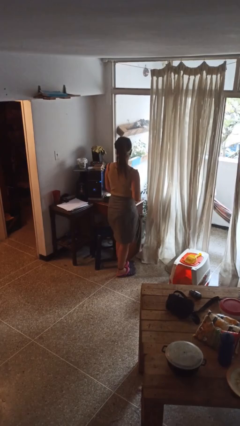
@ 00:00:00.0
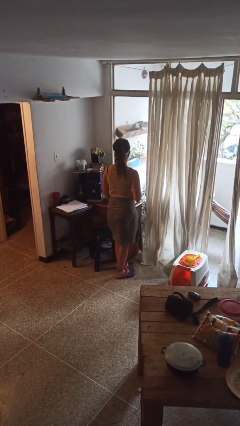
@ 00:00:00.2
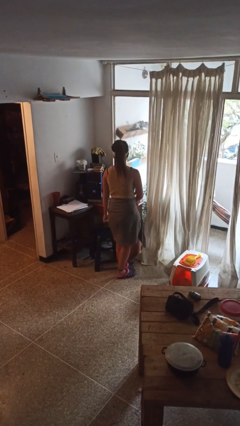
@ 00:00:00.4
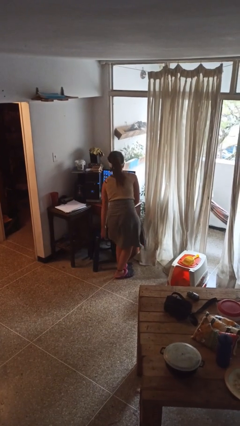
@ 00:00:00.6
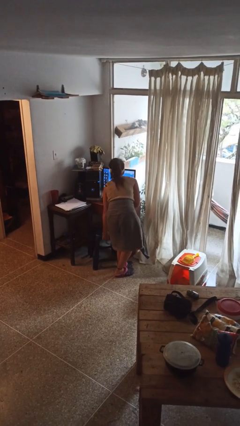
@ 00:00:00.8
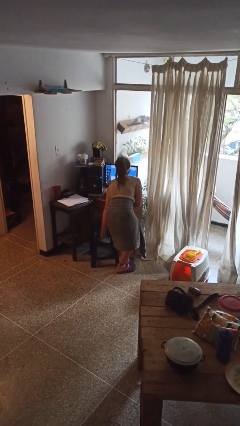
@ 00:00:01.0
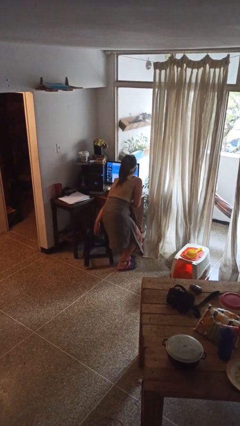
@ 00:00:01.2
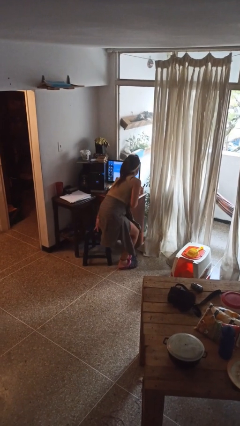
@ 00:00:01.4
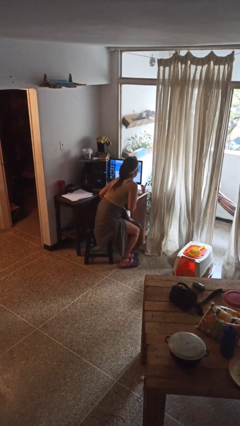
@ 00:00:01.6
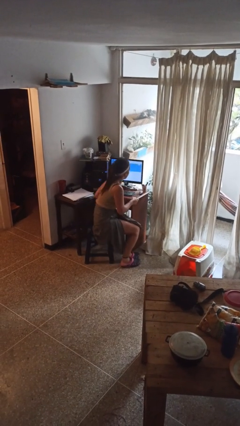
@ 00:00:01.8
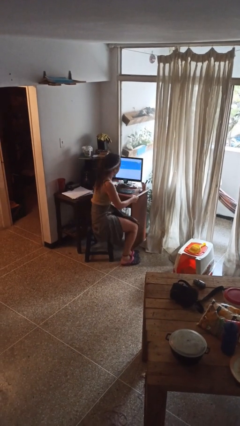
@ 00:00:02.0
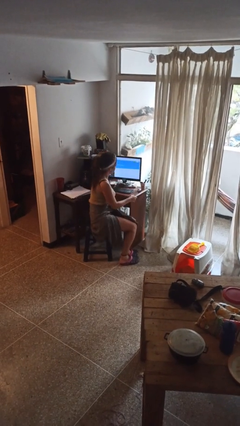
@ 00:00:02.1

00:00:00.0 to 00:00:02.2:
person sits down

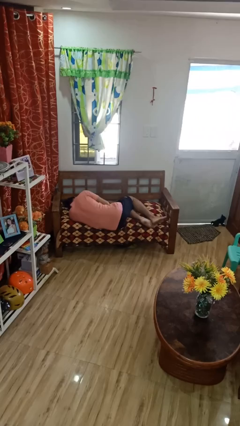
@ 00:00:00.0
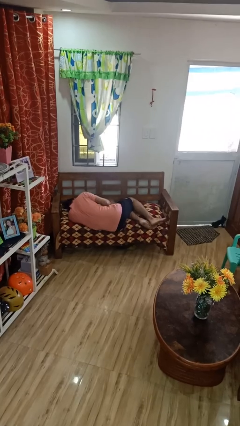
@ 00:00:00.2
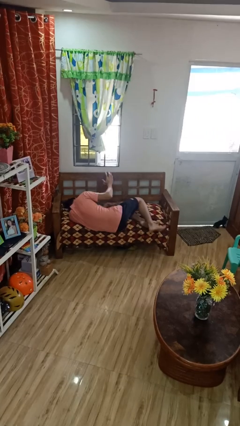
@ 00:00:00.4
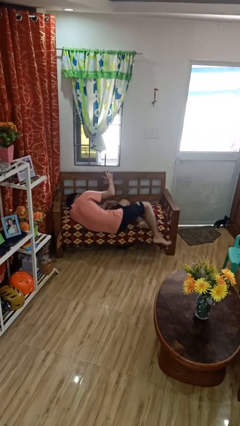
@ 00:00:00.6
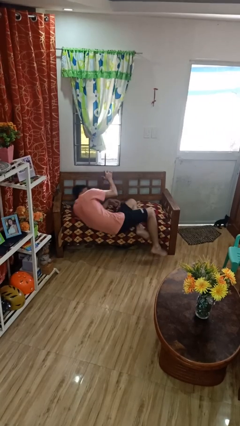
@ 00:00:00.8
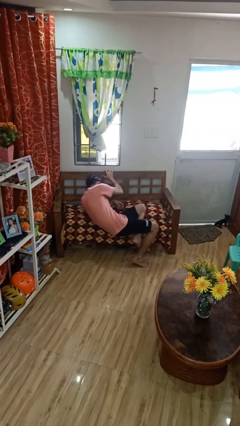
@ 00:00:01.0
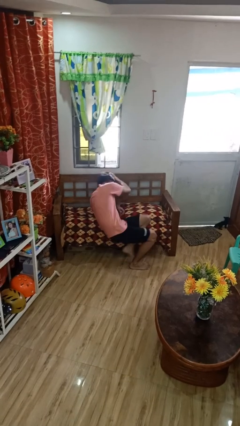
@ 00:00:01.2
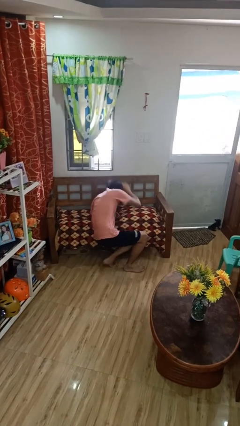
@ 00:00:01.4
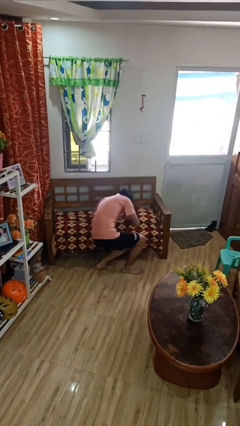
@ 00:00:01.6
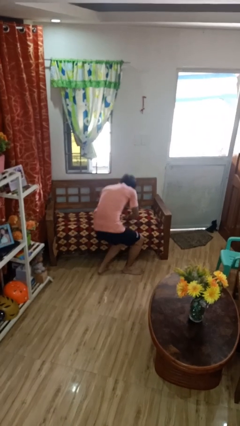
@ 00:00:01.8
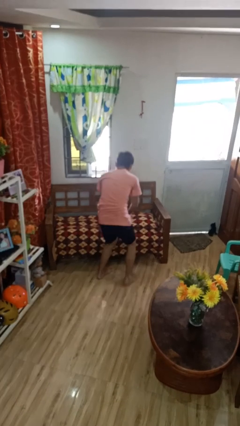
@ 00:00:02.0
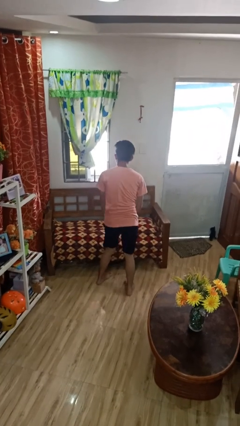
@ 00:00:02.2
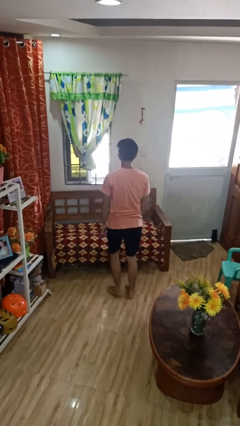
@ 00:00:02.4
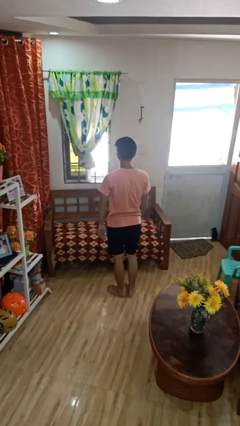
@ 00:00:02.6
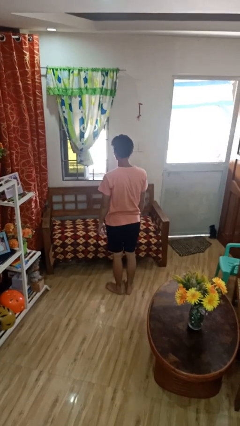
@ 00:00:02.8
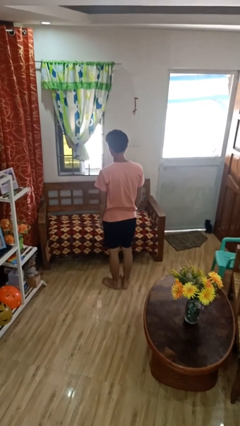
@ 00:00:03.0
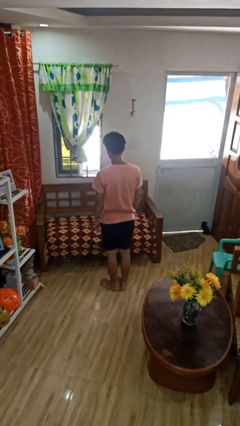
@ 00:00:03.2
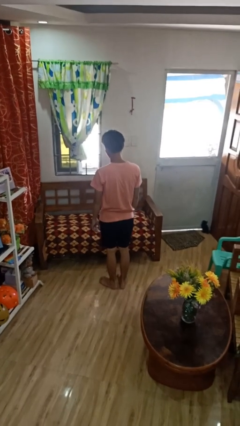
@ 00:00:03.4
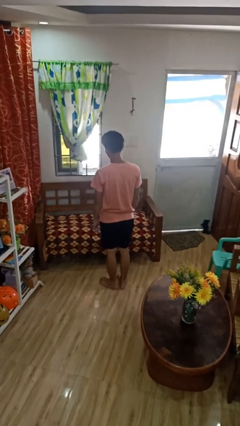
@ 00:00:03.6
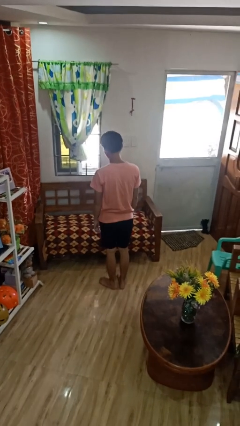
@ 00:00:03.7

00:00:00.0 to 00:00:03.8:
person stands up

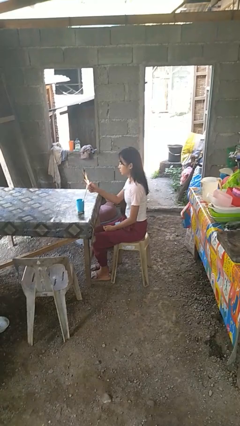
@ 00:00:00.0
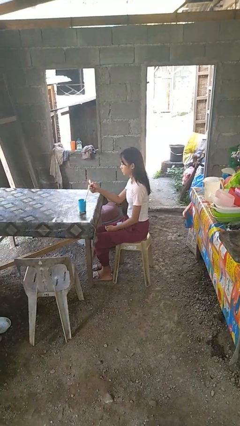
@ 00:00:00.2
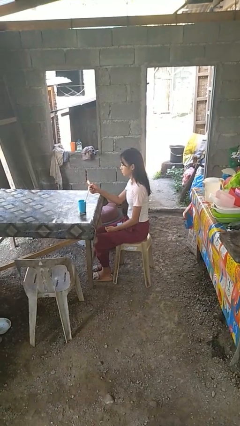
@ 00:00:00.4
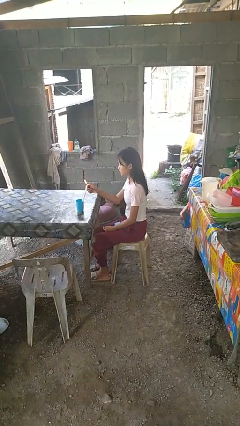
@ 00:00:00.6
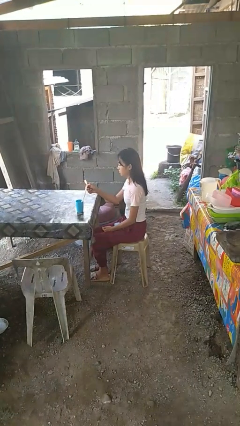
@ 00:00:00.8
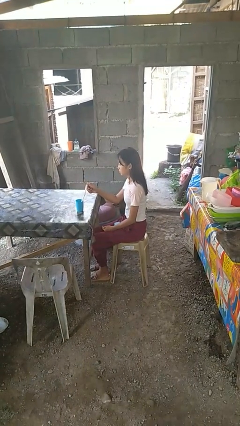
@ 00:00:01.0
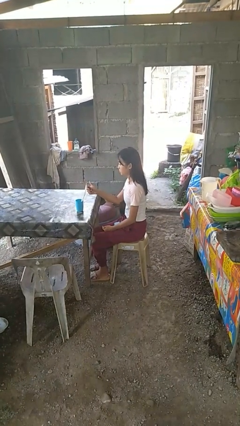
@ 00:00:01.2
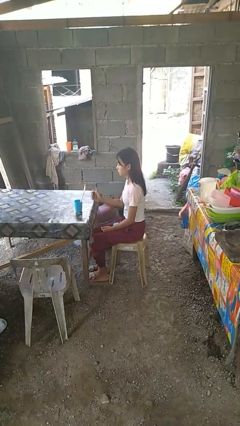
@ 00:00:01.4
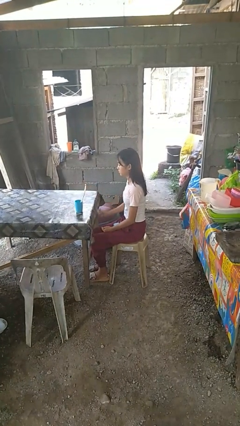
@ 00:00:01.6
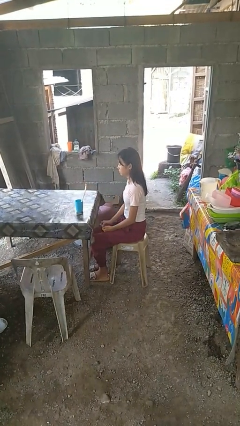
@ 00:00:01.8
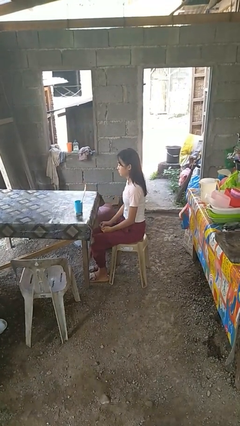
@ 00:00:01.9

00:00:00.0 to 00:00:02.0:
person lights candle

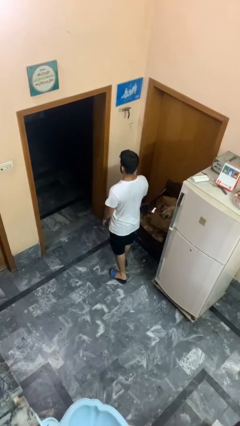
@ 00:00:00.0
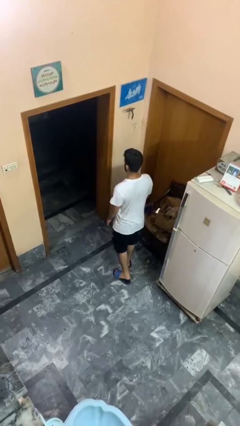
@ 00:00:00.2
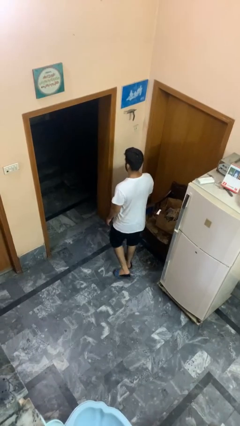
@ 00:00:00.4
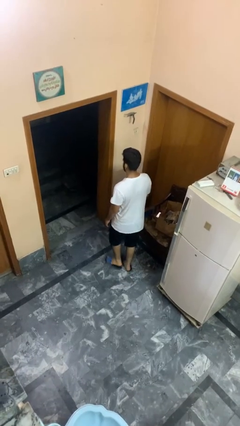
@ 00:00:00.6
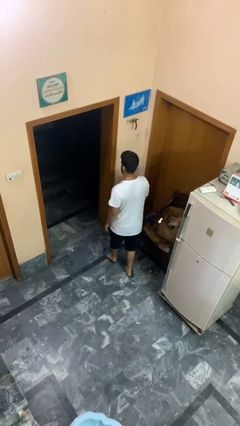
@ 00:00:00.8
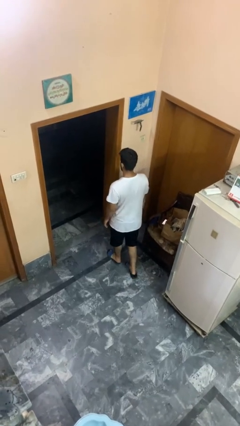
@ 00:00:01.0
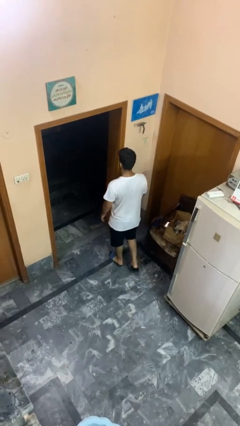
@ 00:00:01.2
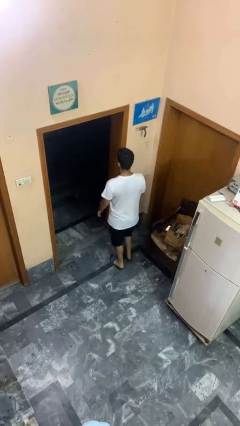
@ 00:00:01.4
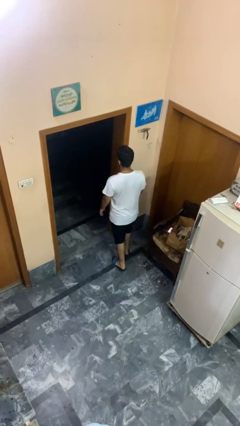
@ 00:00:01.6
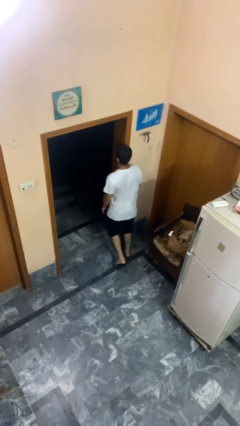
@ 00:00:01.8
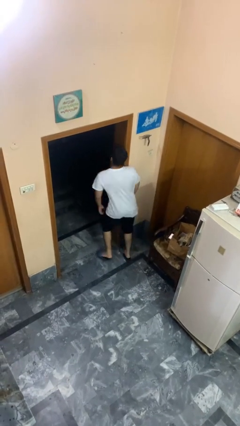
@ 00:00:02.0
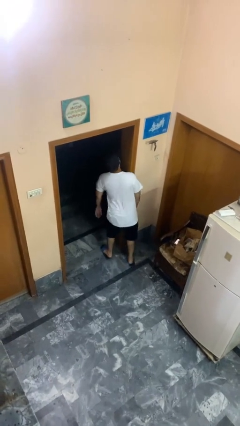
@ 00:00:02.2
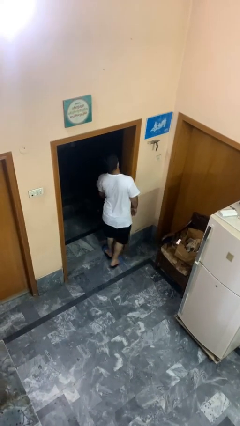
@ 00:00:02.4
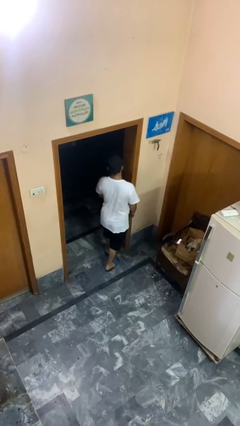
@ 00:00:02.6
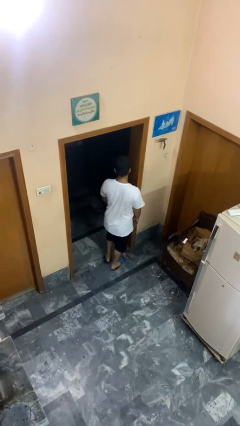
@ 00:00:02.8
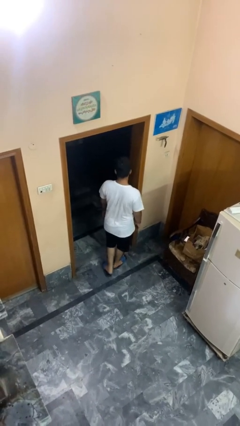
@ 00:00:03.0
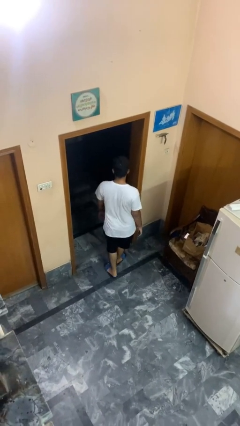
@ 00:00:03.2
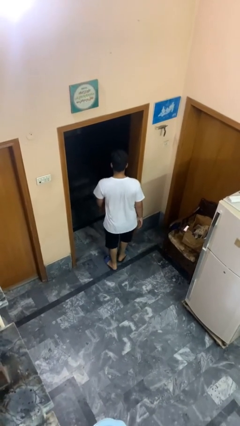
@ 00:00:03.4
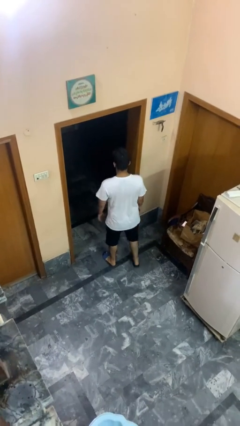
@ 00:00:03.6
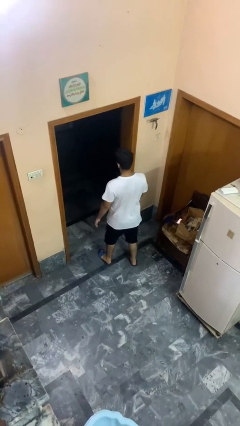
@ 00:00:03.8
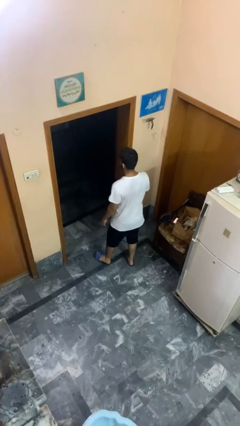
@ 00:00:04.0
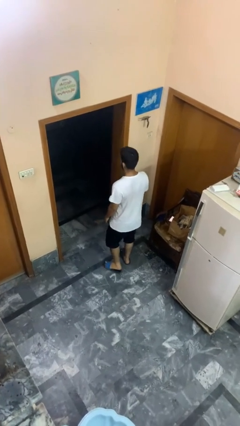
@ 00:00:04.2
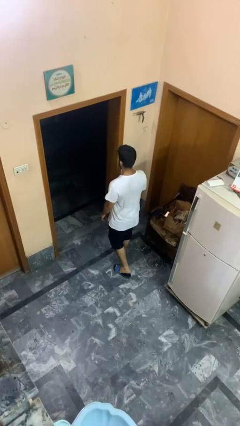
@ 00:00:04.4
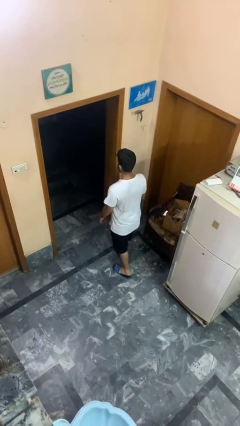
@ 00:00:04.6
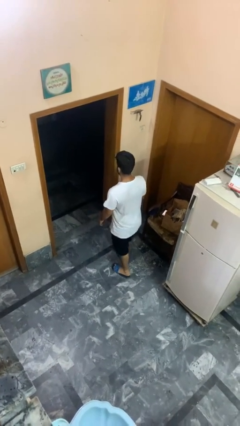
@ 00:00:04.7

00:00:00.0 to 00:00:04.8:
person bumps into wall

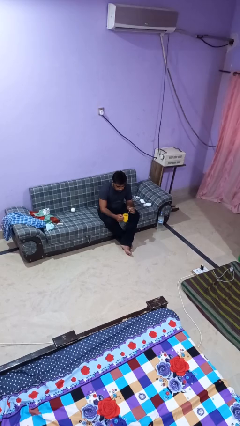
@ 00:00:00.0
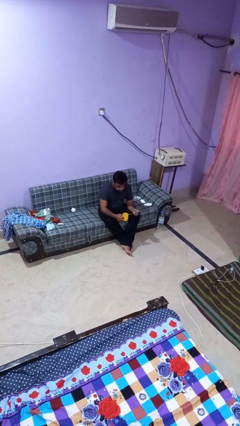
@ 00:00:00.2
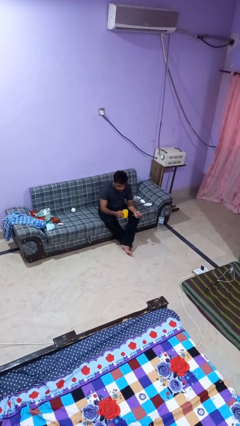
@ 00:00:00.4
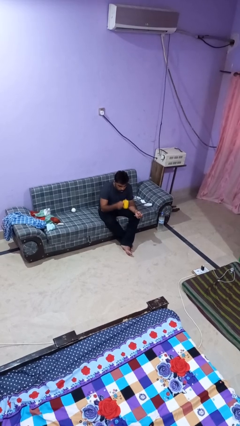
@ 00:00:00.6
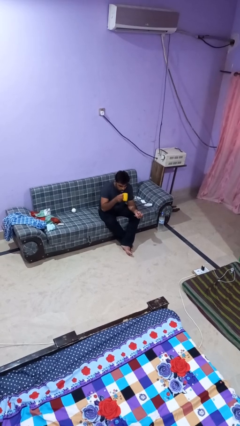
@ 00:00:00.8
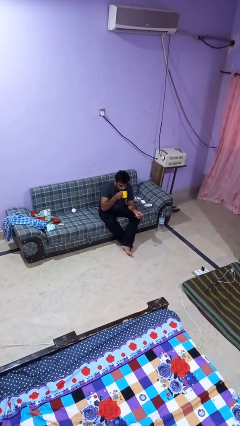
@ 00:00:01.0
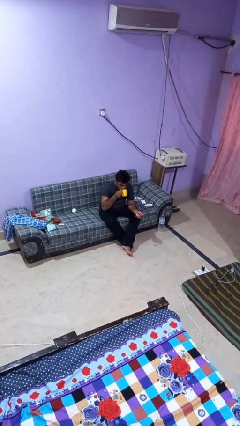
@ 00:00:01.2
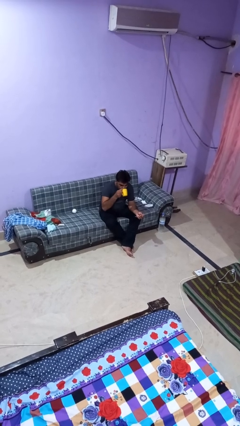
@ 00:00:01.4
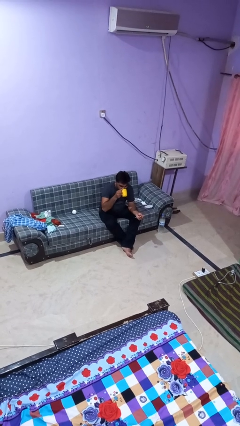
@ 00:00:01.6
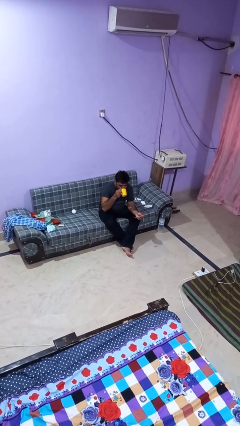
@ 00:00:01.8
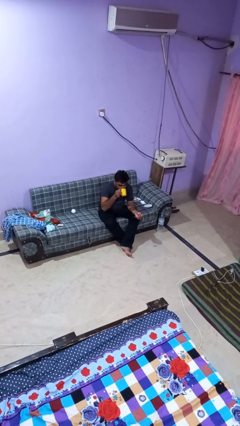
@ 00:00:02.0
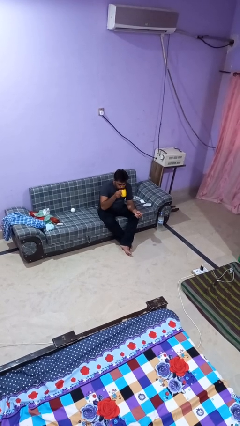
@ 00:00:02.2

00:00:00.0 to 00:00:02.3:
person drinks from mug

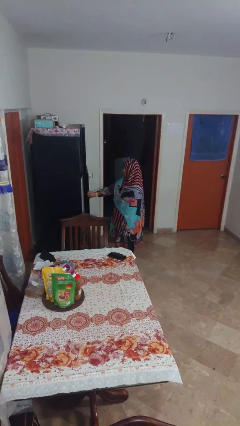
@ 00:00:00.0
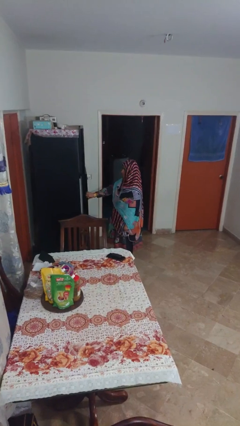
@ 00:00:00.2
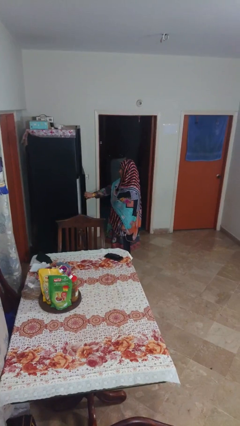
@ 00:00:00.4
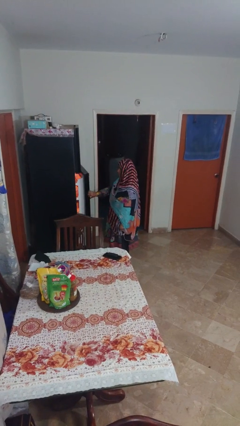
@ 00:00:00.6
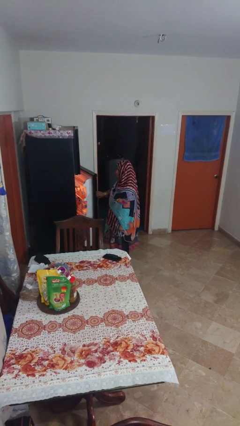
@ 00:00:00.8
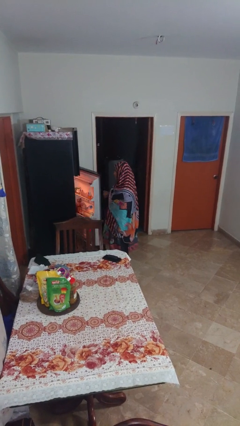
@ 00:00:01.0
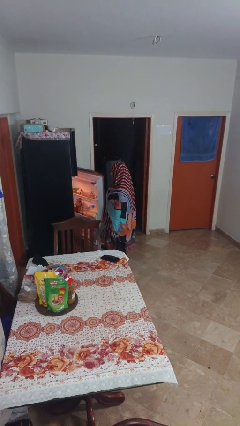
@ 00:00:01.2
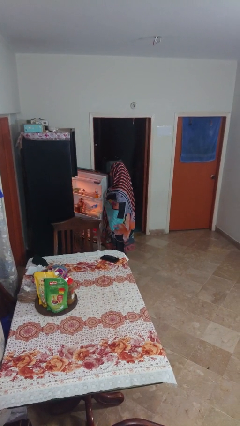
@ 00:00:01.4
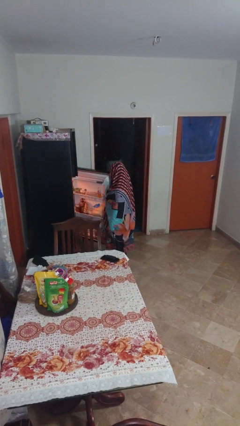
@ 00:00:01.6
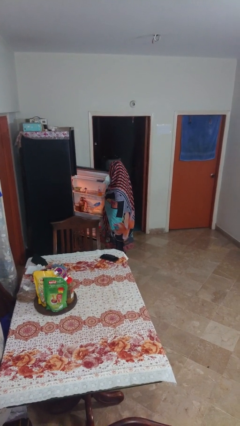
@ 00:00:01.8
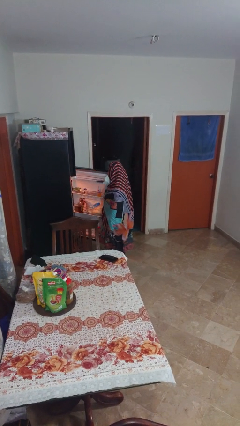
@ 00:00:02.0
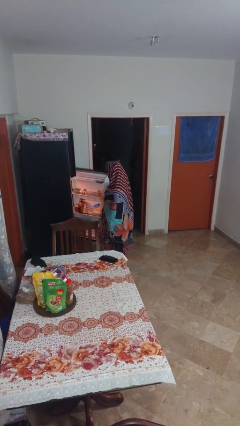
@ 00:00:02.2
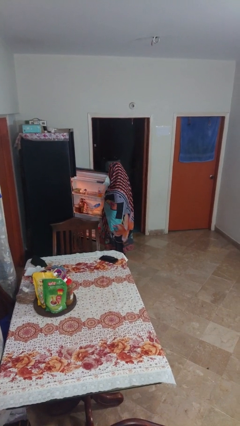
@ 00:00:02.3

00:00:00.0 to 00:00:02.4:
person opens refrigerator
